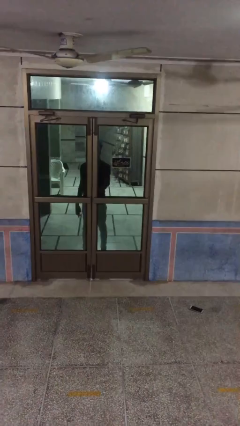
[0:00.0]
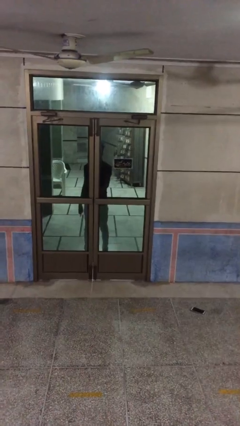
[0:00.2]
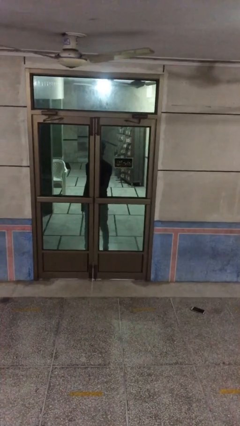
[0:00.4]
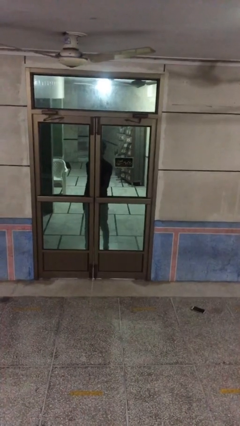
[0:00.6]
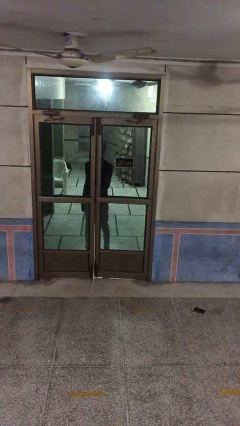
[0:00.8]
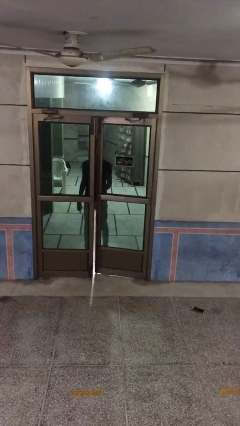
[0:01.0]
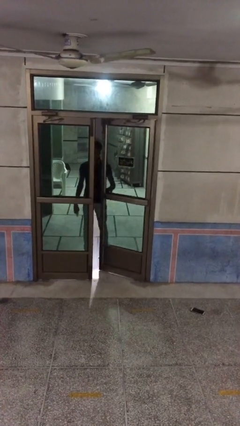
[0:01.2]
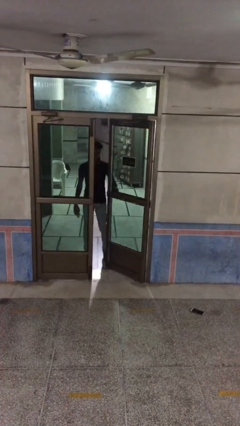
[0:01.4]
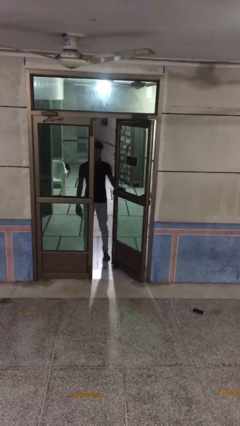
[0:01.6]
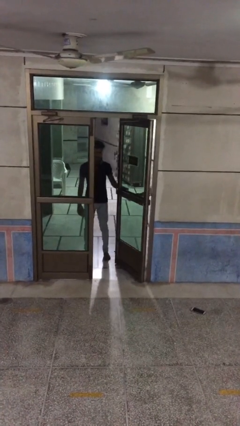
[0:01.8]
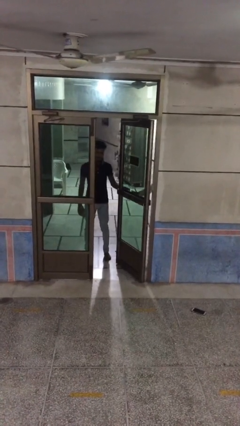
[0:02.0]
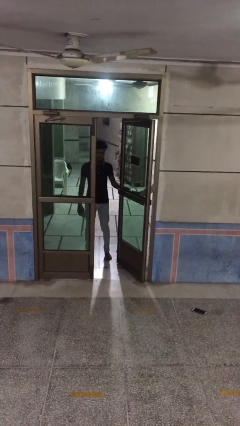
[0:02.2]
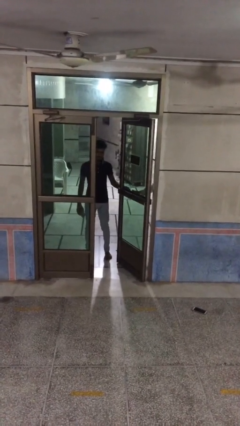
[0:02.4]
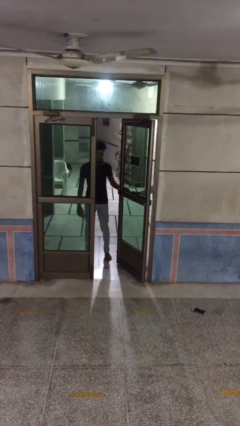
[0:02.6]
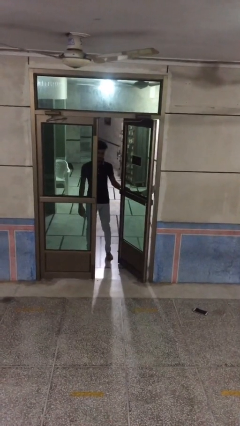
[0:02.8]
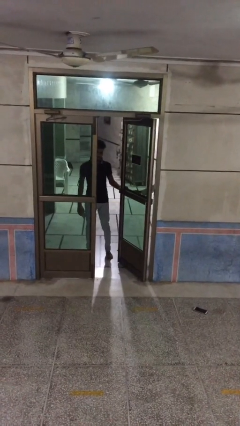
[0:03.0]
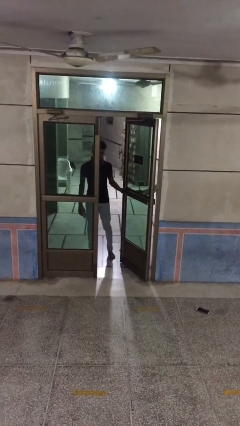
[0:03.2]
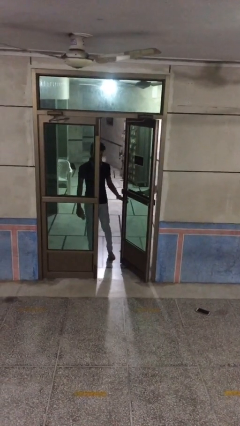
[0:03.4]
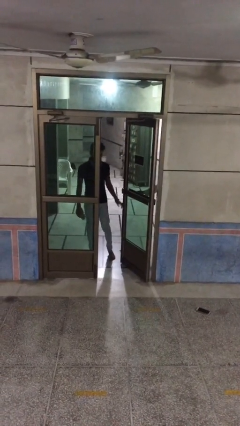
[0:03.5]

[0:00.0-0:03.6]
person opens facility door

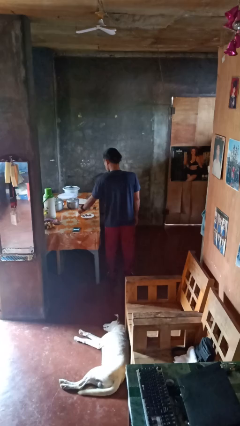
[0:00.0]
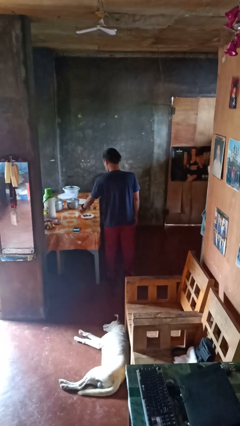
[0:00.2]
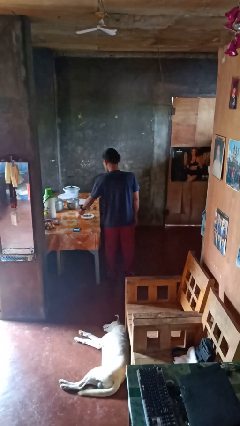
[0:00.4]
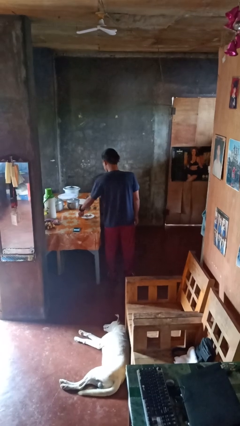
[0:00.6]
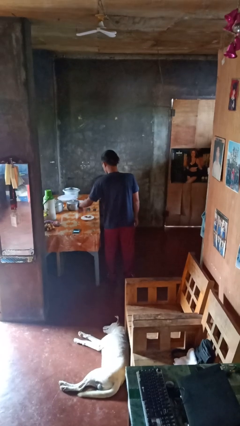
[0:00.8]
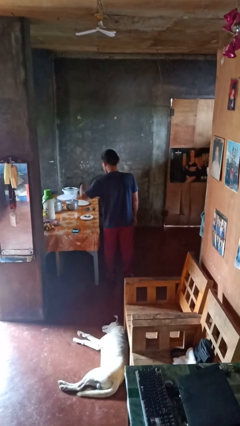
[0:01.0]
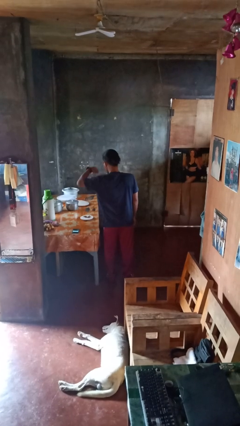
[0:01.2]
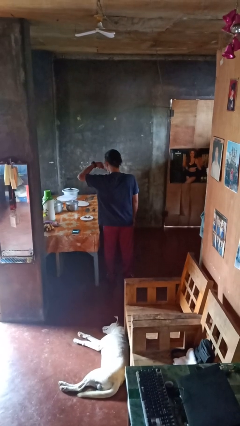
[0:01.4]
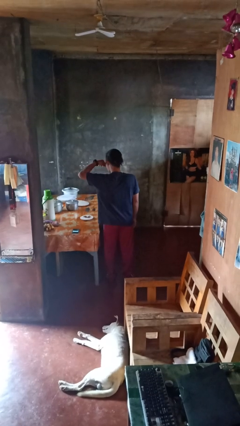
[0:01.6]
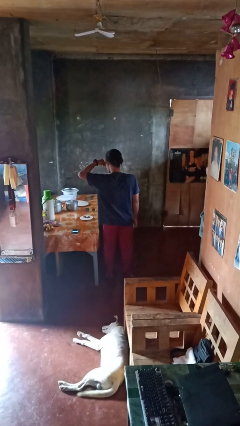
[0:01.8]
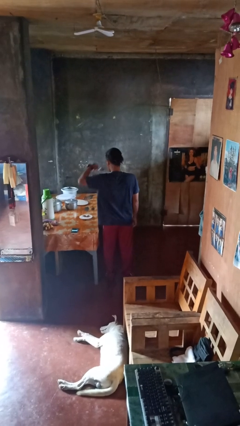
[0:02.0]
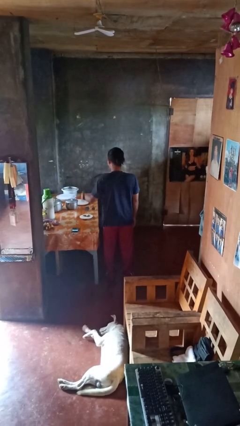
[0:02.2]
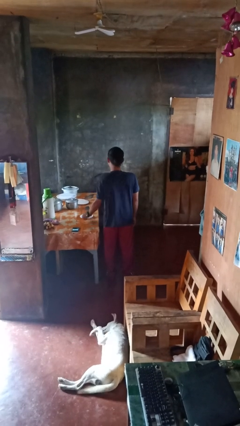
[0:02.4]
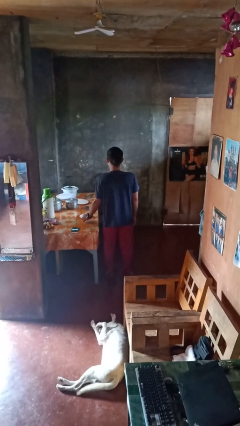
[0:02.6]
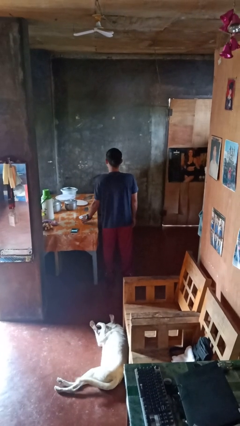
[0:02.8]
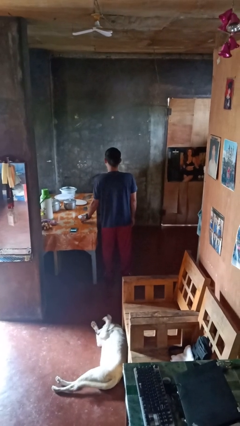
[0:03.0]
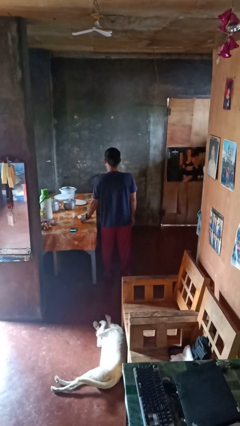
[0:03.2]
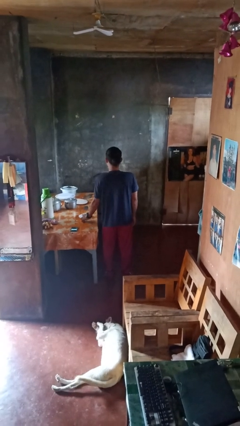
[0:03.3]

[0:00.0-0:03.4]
person eats with utensil

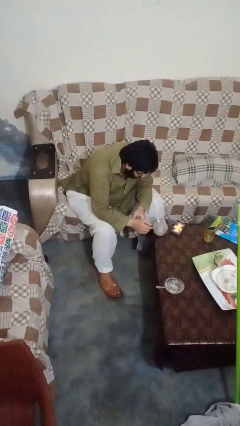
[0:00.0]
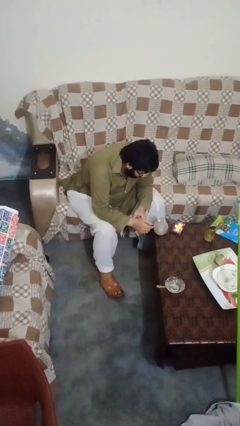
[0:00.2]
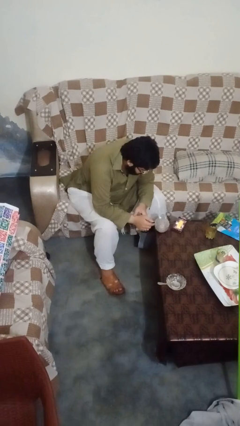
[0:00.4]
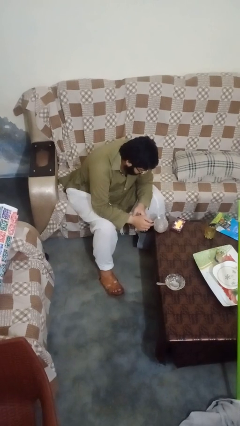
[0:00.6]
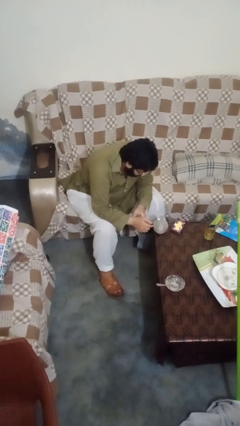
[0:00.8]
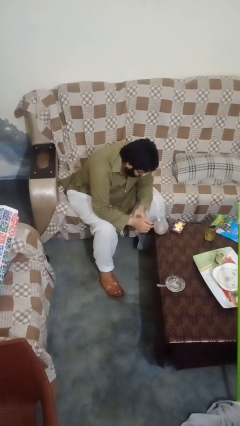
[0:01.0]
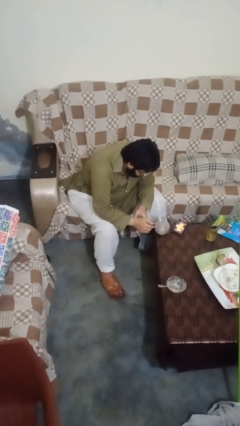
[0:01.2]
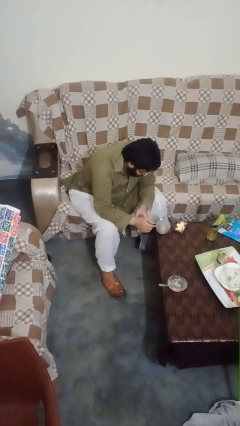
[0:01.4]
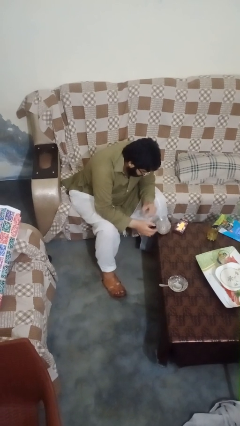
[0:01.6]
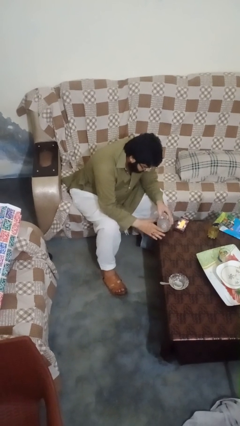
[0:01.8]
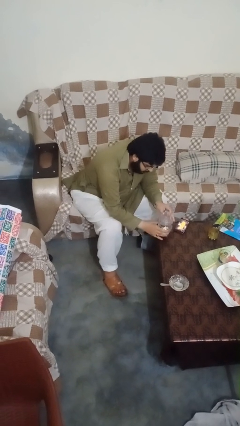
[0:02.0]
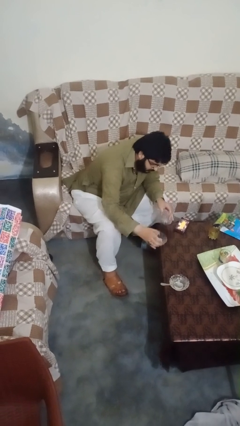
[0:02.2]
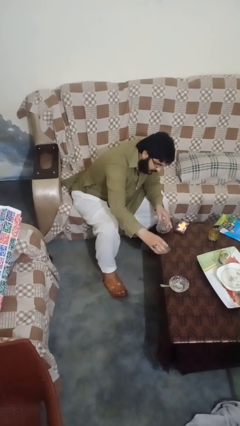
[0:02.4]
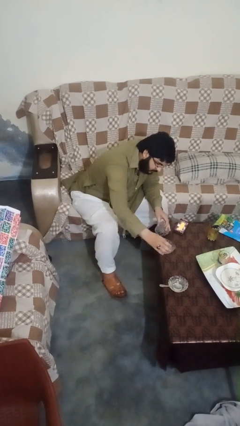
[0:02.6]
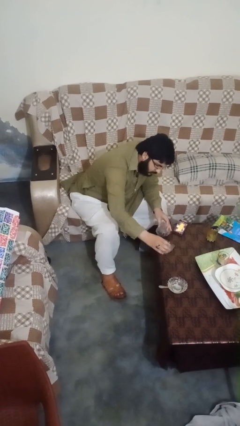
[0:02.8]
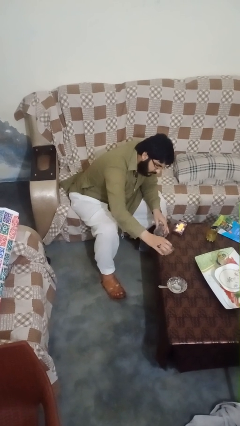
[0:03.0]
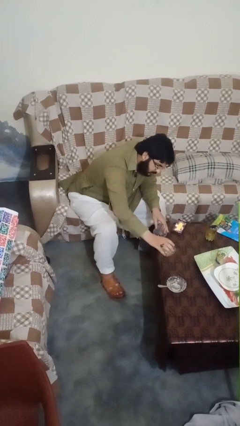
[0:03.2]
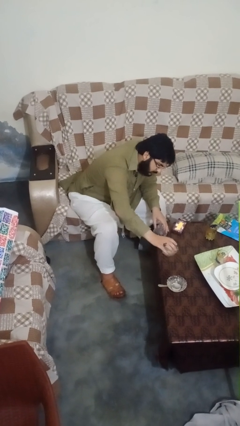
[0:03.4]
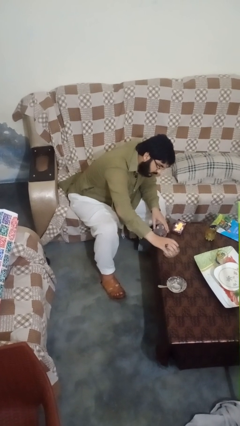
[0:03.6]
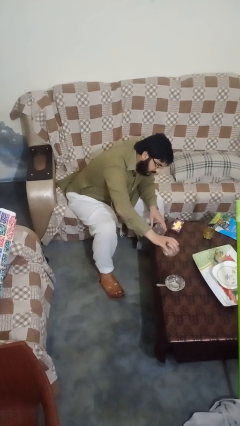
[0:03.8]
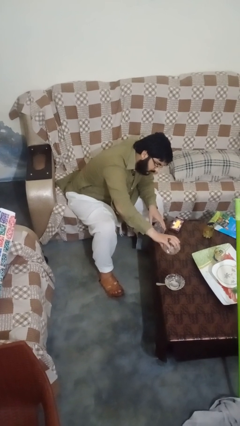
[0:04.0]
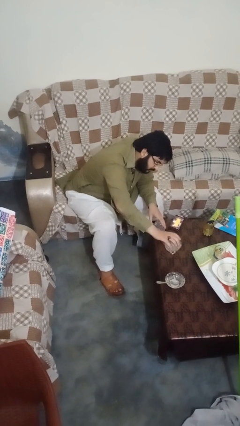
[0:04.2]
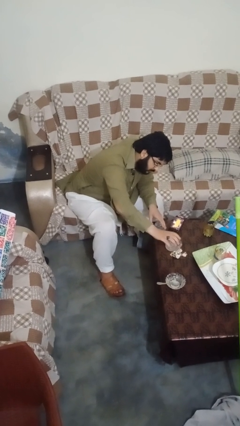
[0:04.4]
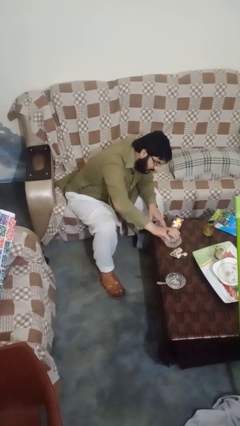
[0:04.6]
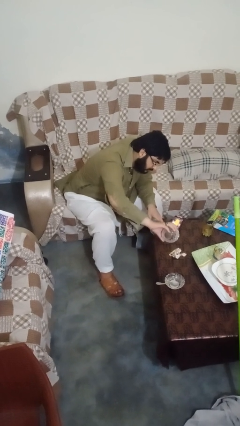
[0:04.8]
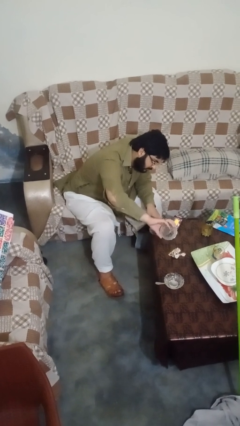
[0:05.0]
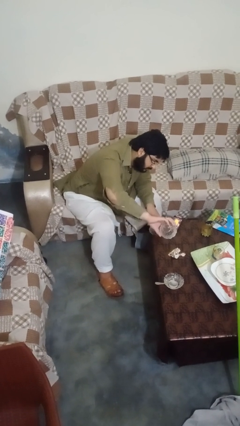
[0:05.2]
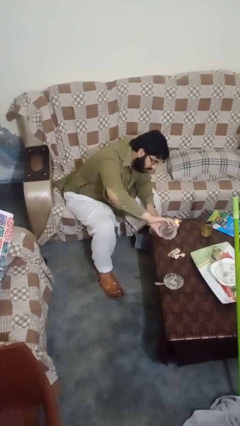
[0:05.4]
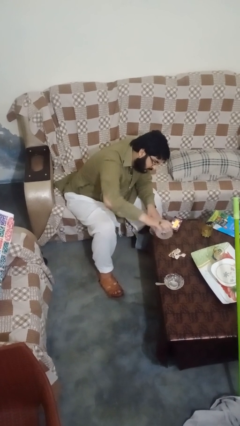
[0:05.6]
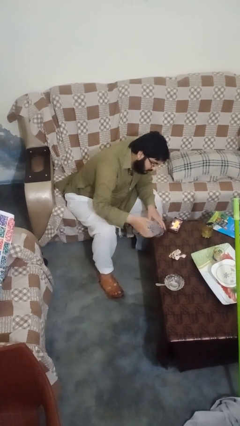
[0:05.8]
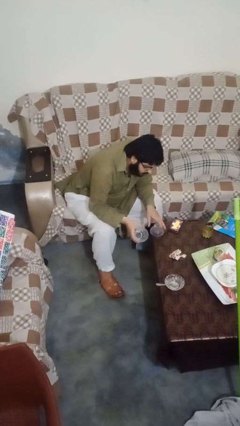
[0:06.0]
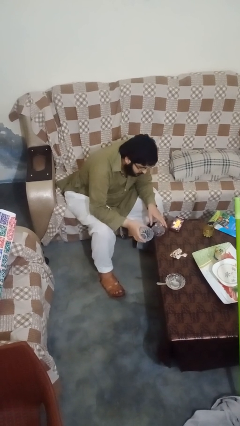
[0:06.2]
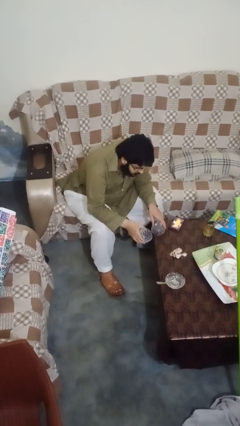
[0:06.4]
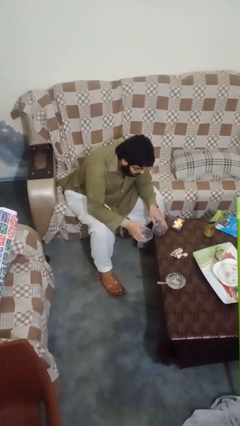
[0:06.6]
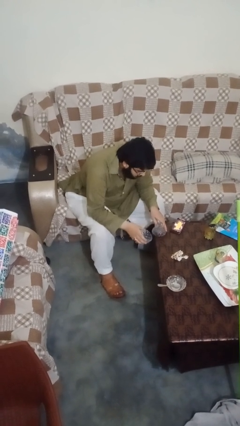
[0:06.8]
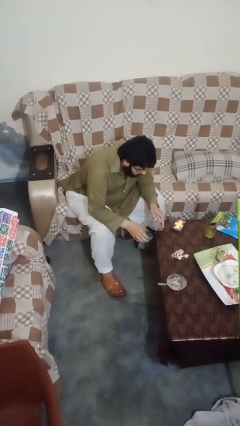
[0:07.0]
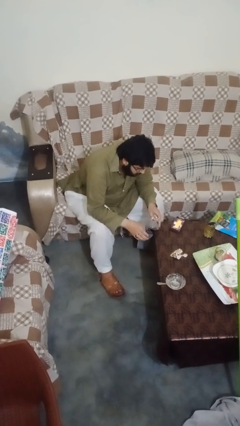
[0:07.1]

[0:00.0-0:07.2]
person unloads box onto table

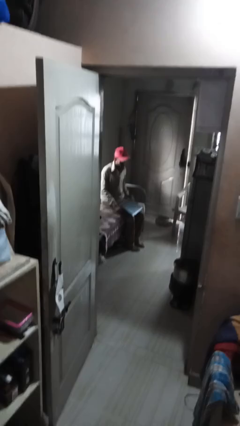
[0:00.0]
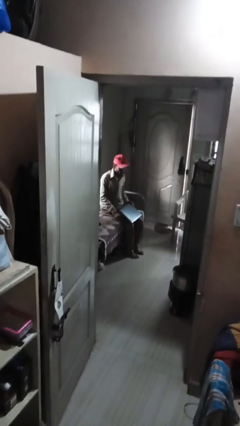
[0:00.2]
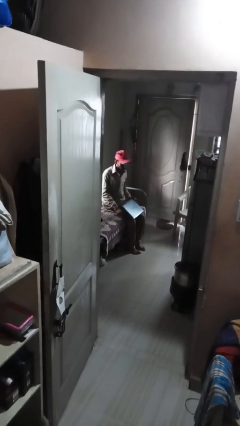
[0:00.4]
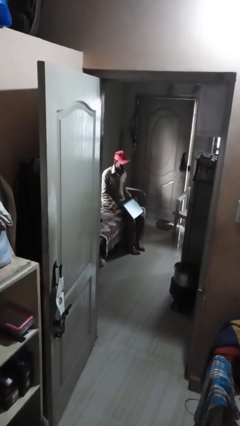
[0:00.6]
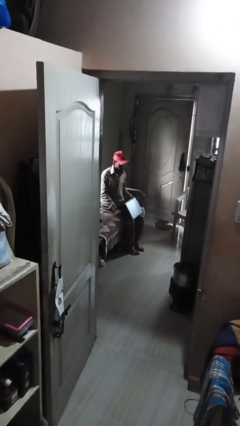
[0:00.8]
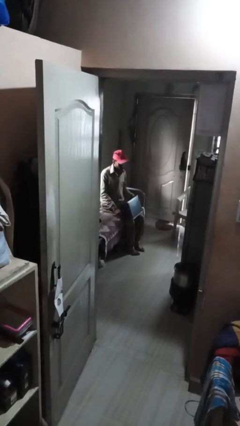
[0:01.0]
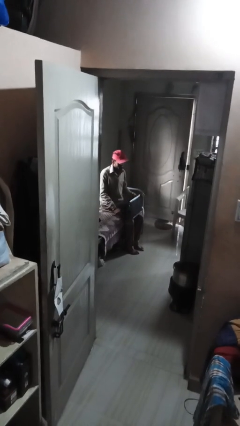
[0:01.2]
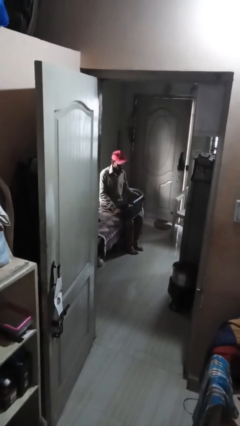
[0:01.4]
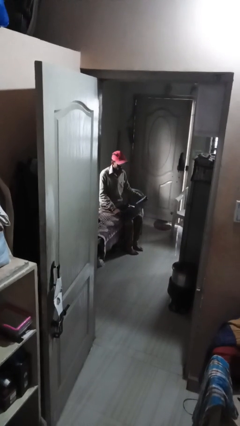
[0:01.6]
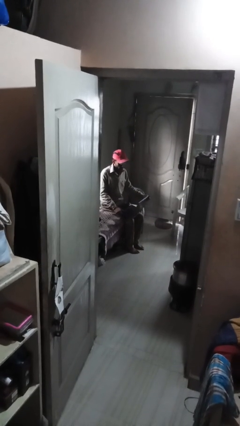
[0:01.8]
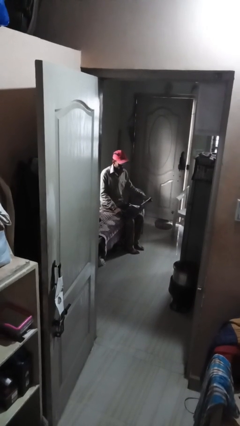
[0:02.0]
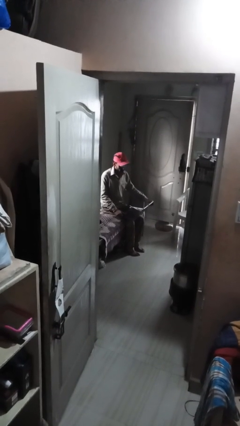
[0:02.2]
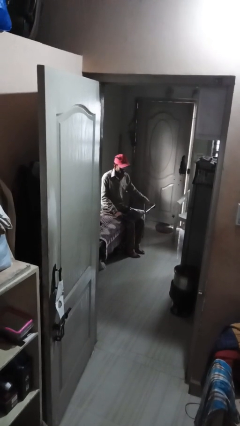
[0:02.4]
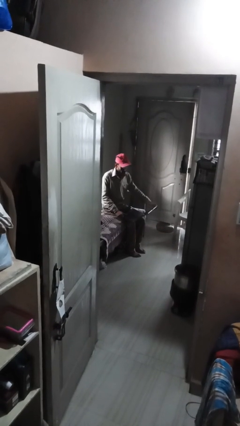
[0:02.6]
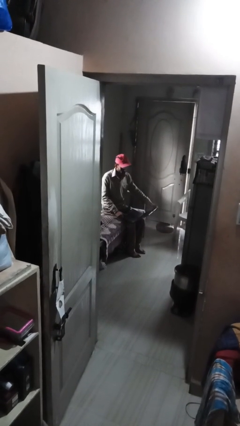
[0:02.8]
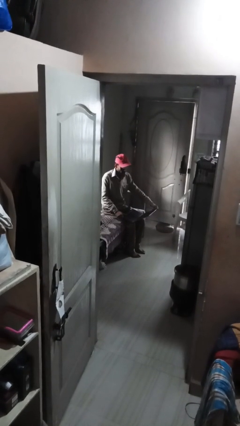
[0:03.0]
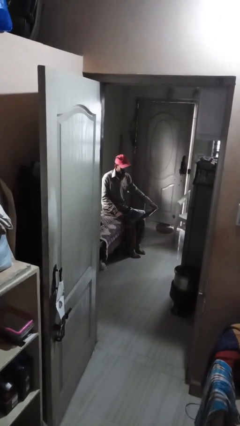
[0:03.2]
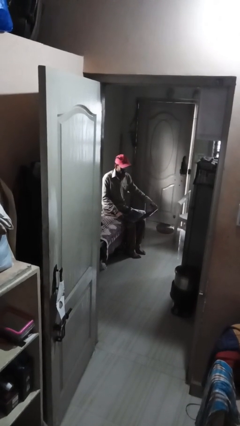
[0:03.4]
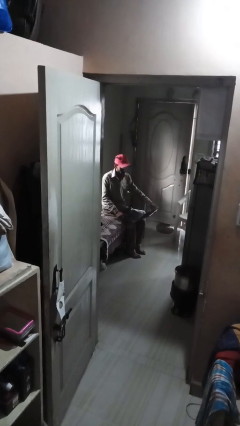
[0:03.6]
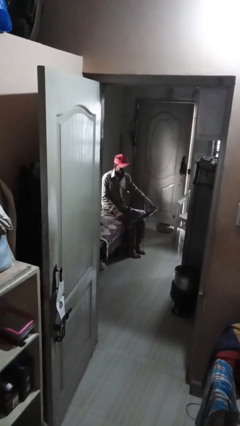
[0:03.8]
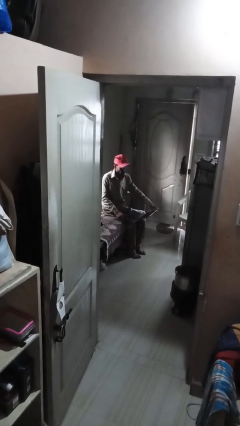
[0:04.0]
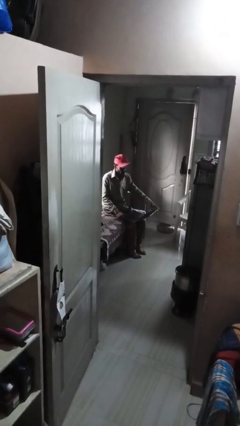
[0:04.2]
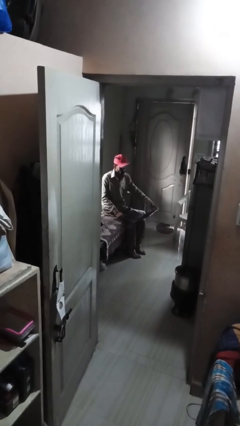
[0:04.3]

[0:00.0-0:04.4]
person opens laptop
